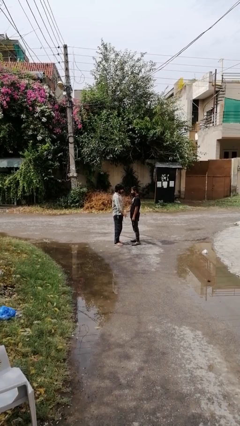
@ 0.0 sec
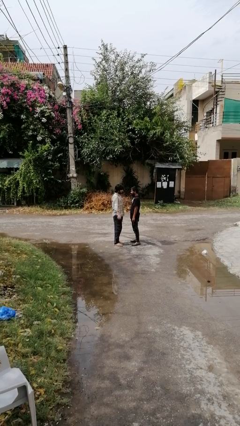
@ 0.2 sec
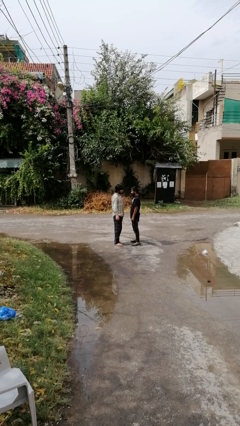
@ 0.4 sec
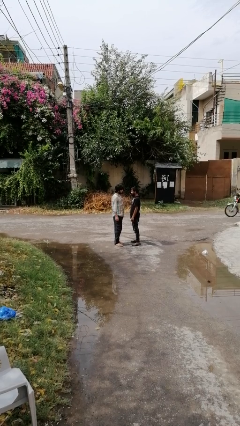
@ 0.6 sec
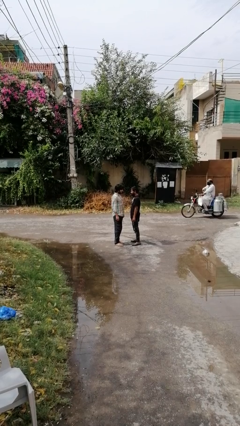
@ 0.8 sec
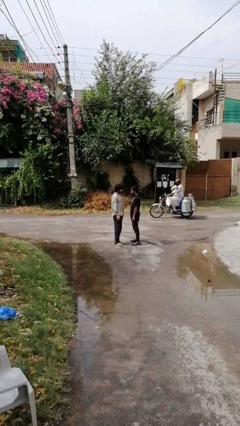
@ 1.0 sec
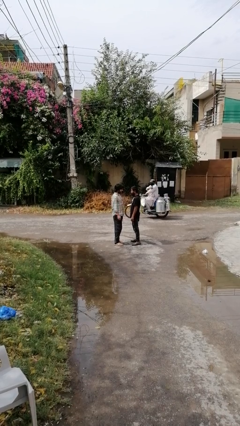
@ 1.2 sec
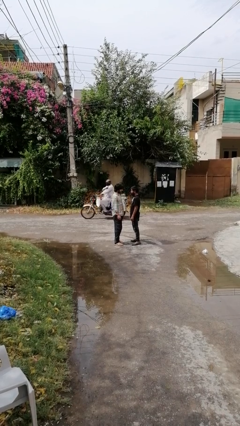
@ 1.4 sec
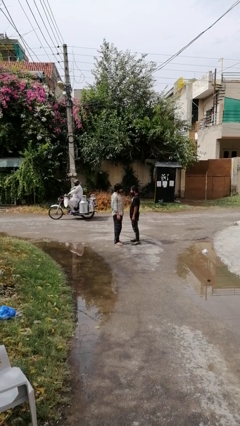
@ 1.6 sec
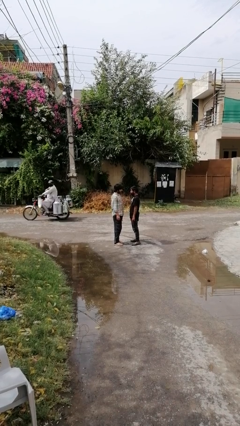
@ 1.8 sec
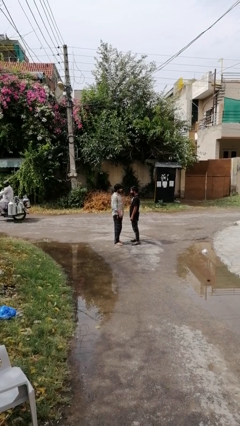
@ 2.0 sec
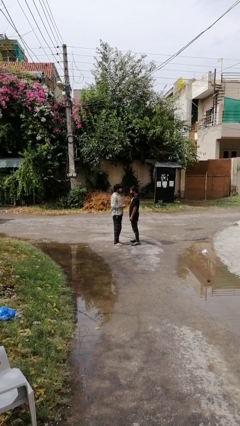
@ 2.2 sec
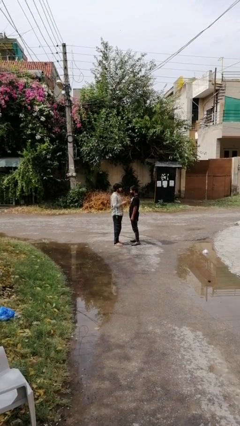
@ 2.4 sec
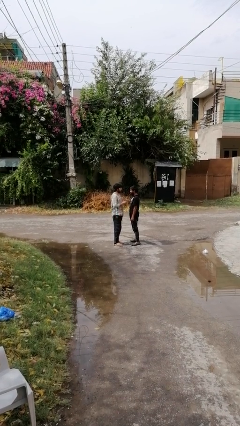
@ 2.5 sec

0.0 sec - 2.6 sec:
person highfives hand

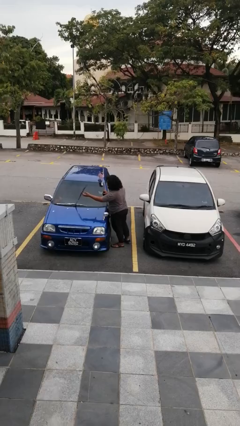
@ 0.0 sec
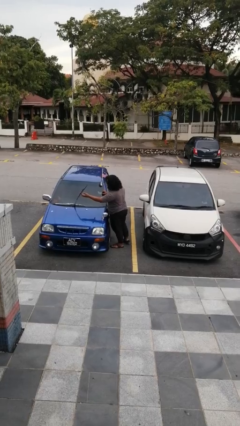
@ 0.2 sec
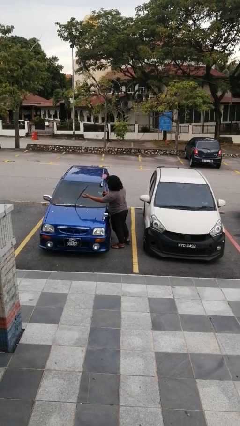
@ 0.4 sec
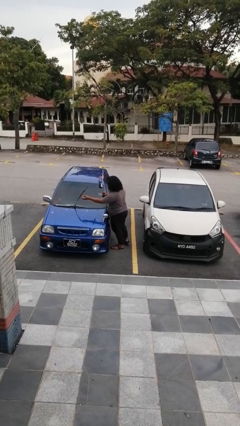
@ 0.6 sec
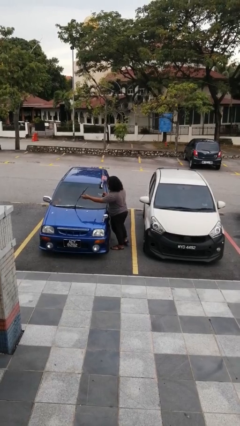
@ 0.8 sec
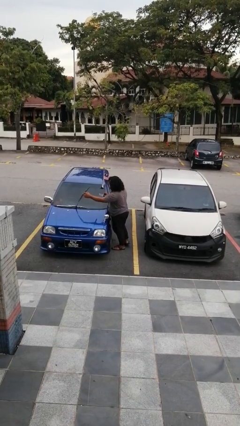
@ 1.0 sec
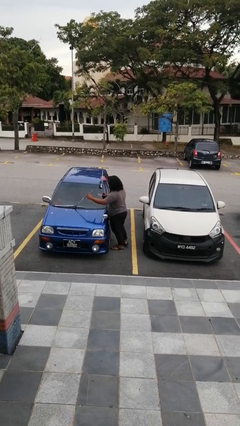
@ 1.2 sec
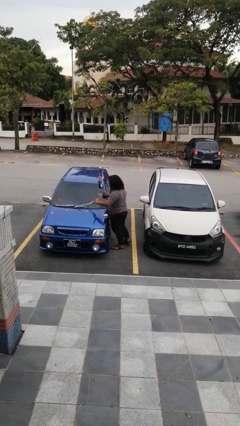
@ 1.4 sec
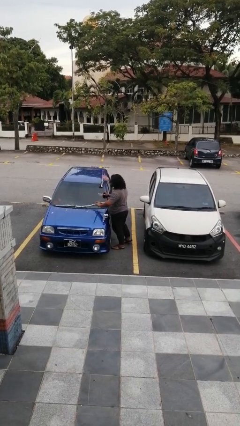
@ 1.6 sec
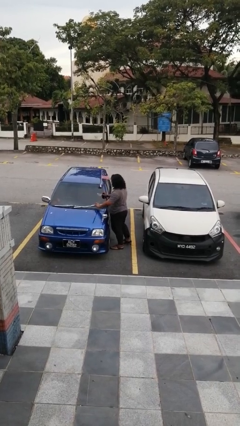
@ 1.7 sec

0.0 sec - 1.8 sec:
person flips down car wipers

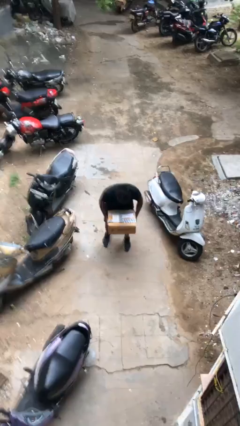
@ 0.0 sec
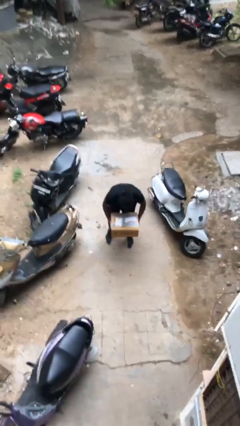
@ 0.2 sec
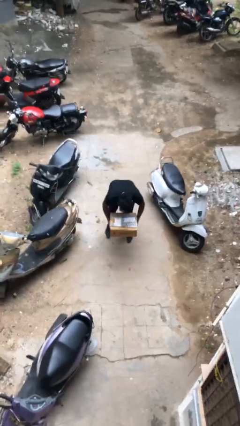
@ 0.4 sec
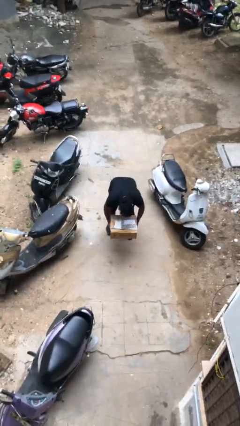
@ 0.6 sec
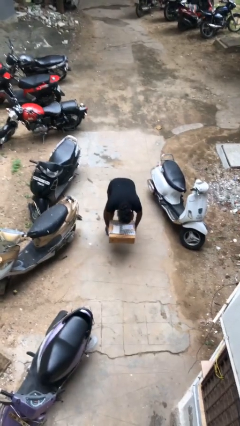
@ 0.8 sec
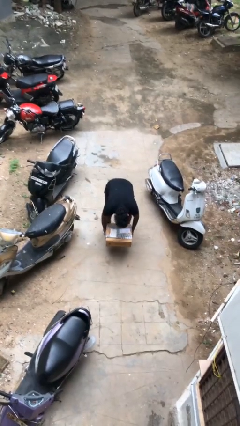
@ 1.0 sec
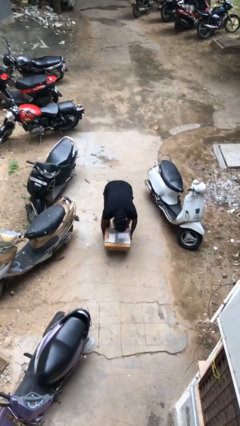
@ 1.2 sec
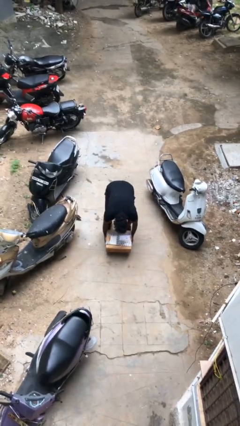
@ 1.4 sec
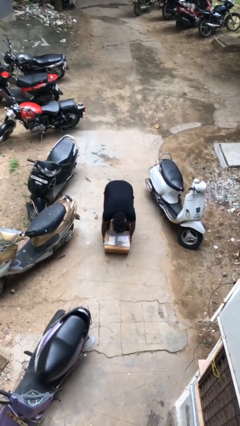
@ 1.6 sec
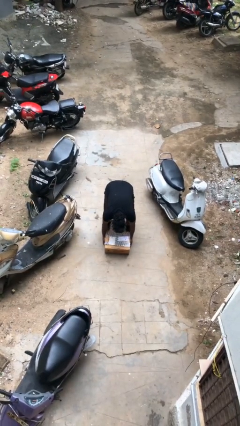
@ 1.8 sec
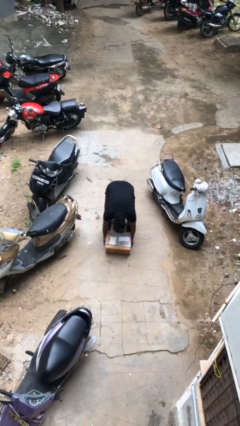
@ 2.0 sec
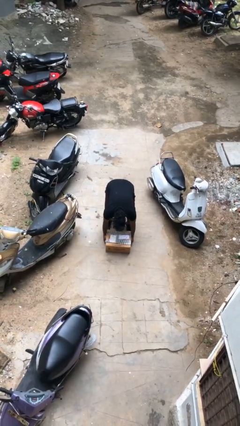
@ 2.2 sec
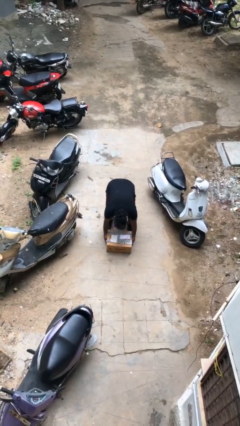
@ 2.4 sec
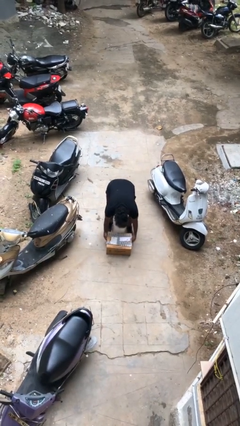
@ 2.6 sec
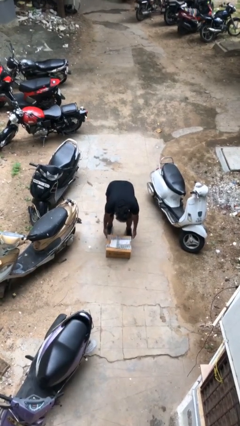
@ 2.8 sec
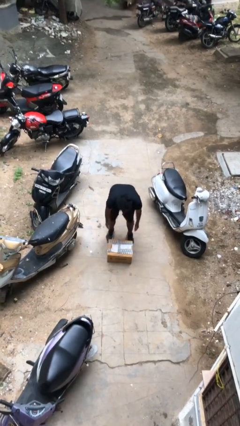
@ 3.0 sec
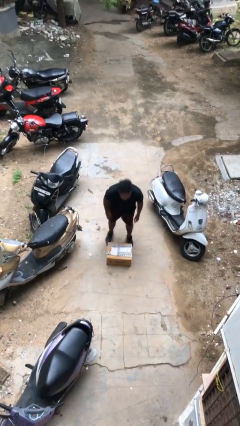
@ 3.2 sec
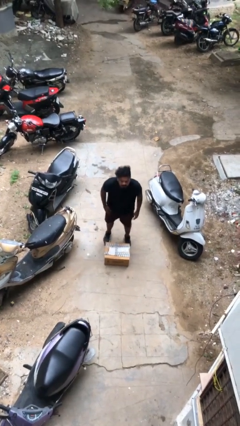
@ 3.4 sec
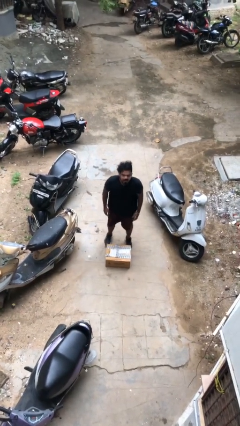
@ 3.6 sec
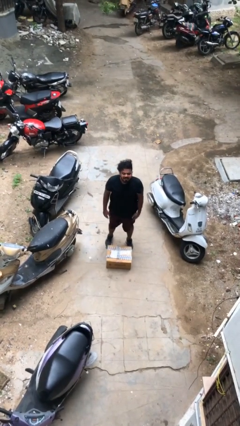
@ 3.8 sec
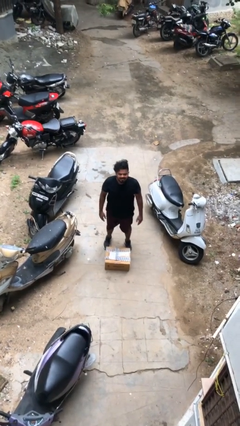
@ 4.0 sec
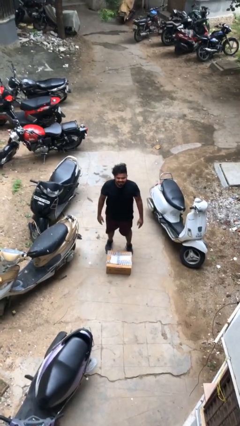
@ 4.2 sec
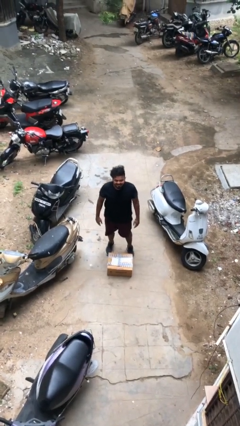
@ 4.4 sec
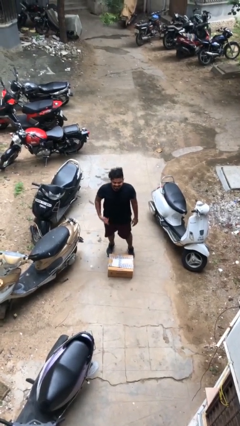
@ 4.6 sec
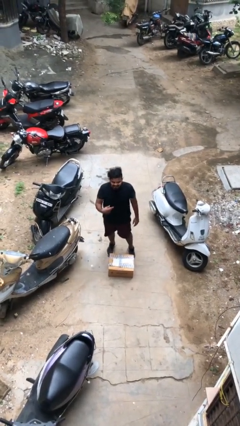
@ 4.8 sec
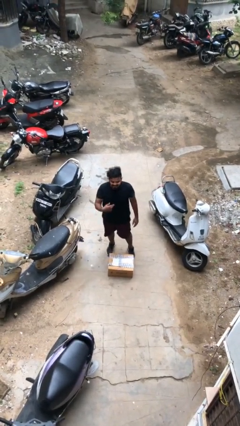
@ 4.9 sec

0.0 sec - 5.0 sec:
person puts down object on floor

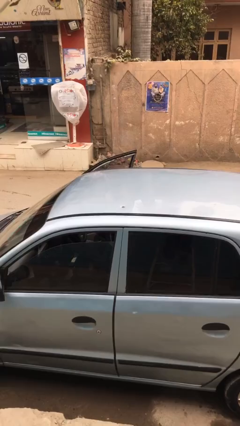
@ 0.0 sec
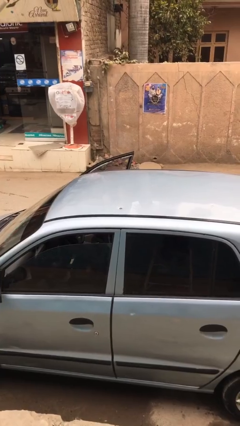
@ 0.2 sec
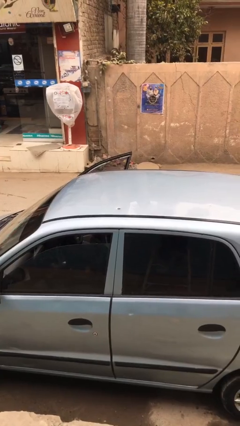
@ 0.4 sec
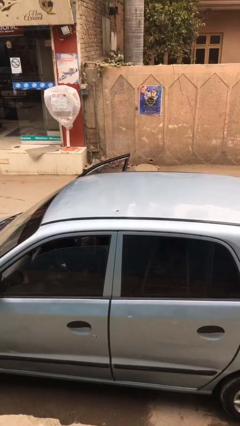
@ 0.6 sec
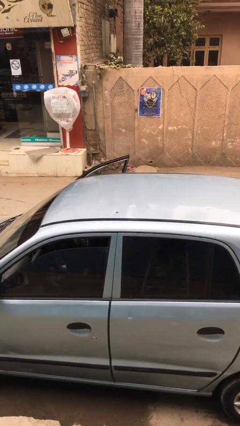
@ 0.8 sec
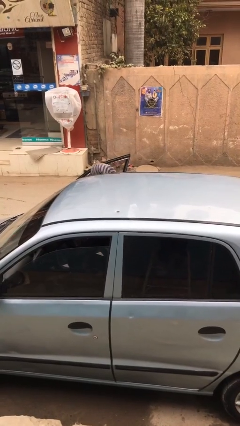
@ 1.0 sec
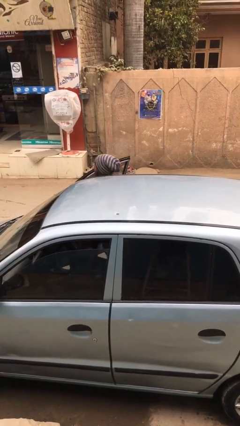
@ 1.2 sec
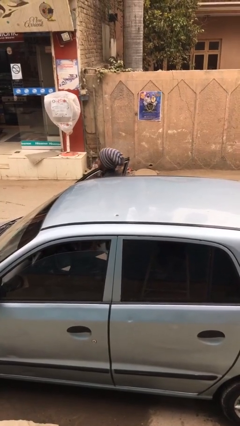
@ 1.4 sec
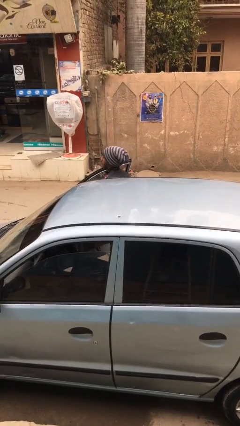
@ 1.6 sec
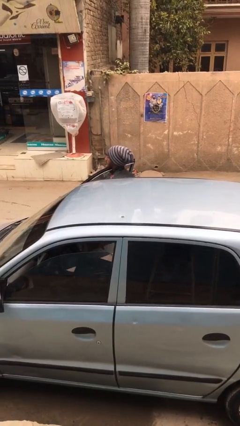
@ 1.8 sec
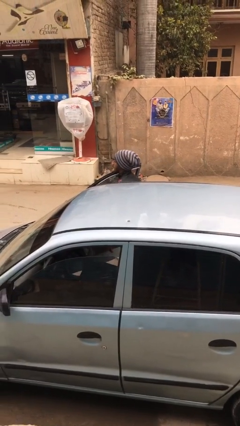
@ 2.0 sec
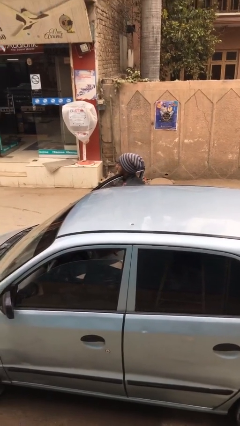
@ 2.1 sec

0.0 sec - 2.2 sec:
person exits car

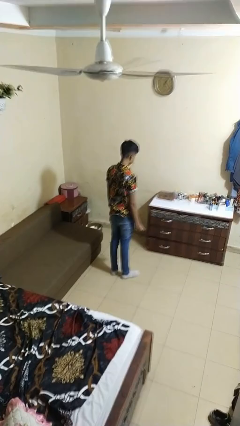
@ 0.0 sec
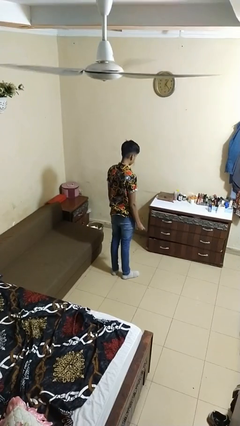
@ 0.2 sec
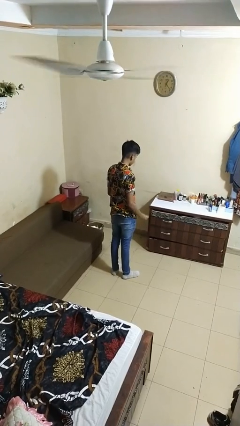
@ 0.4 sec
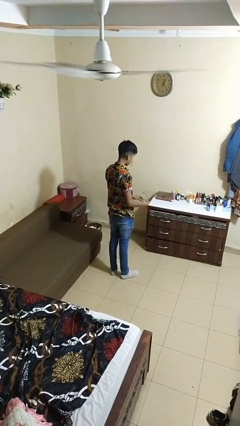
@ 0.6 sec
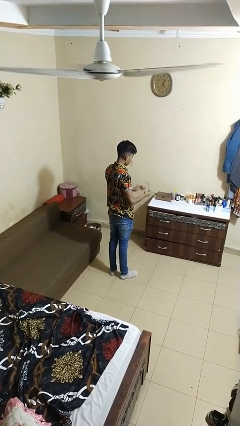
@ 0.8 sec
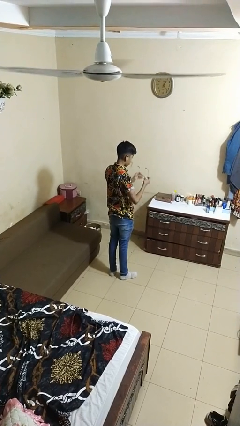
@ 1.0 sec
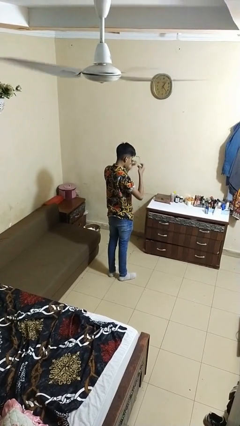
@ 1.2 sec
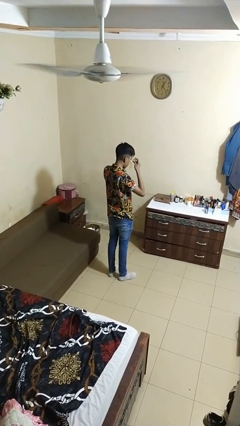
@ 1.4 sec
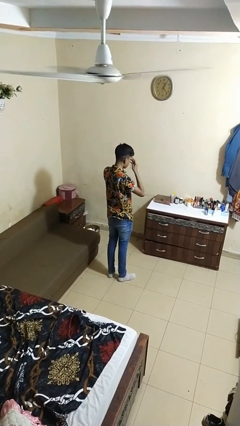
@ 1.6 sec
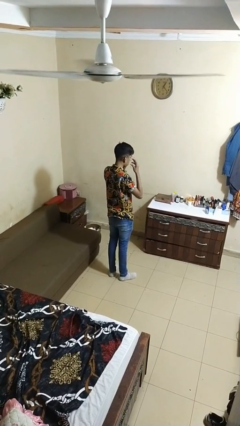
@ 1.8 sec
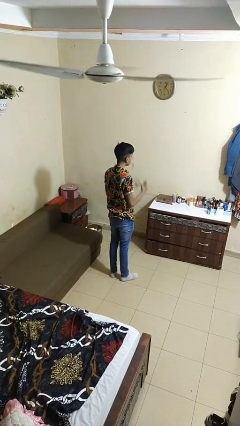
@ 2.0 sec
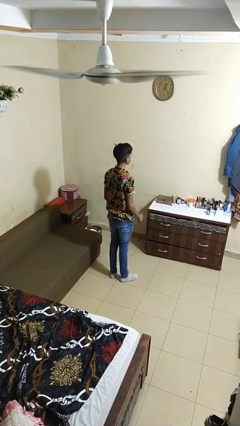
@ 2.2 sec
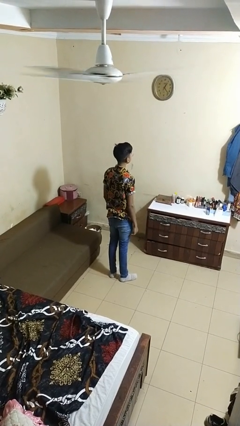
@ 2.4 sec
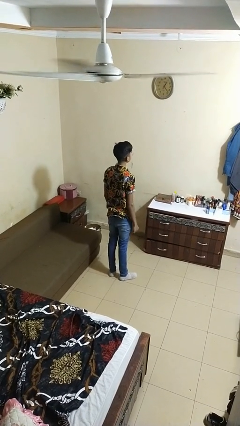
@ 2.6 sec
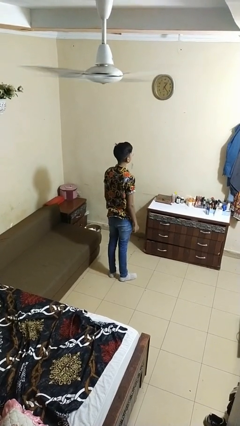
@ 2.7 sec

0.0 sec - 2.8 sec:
person puts on glasses

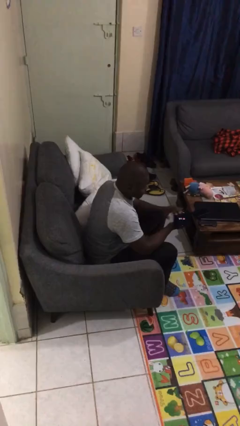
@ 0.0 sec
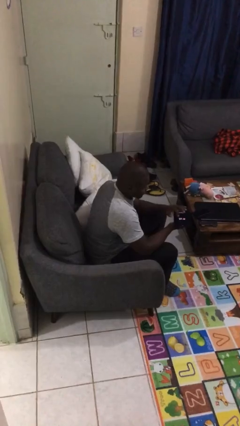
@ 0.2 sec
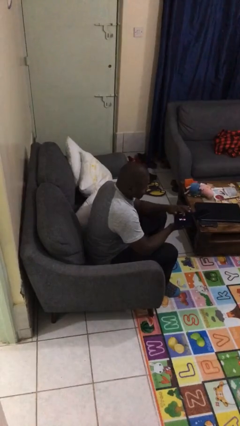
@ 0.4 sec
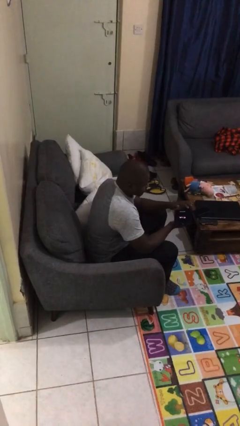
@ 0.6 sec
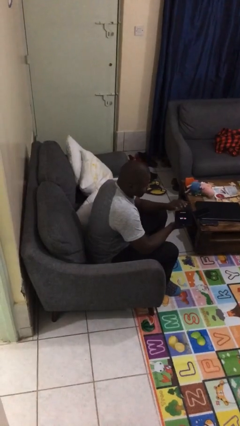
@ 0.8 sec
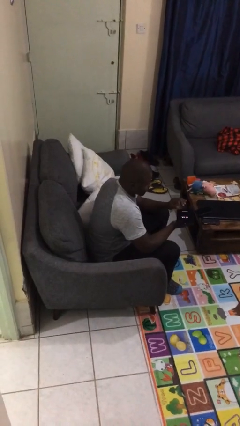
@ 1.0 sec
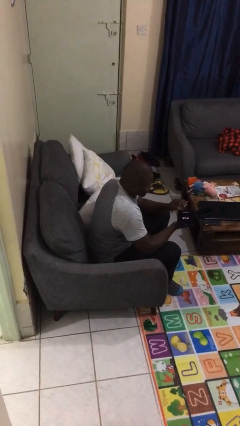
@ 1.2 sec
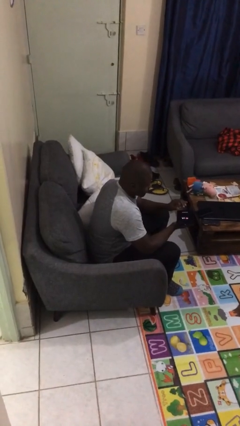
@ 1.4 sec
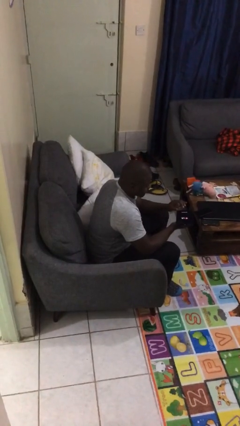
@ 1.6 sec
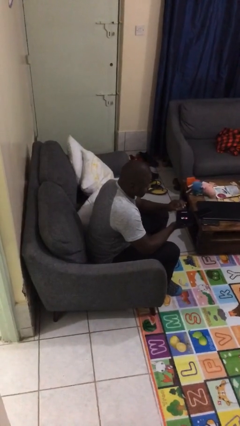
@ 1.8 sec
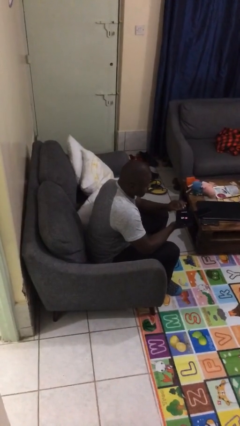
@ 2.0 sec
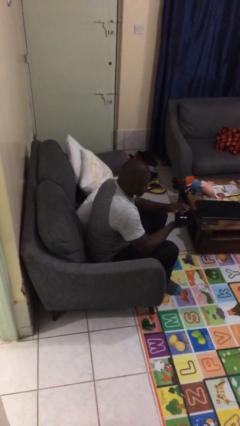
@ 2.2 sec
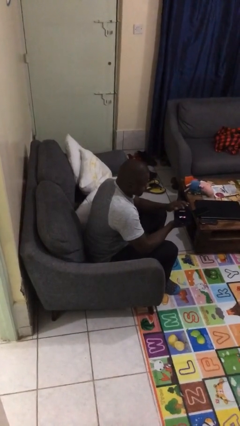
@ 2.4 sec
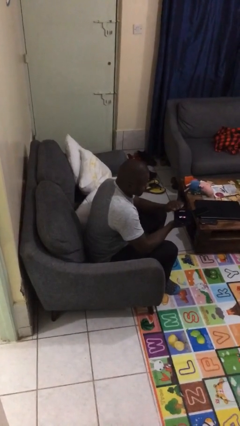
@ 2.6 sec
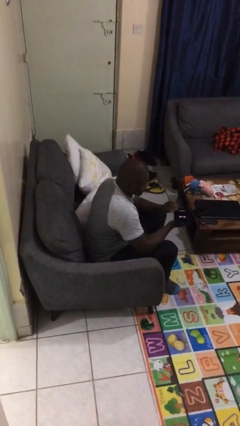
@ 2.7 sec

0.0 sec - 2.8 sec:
person interacts with tablet
